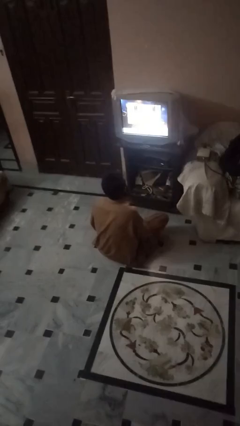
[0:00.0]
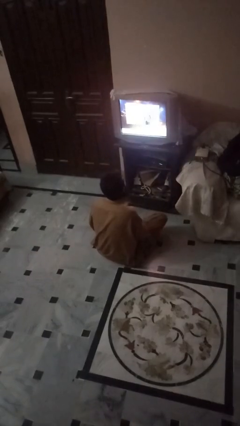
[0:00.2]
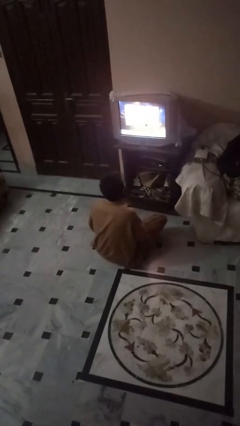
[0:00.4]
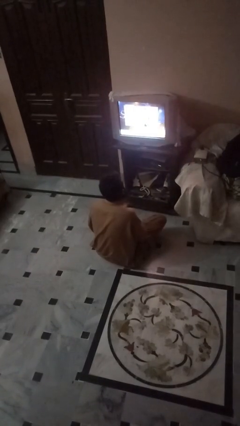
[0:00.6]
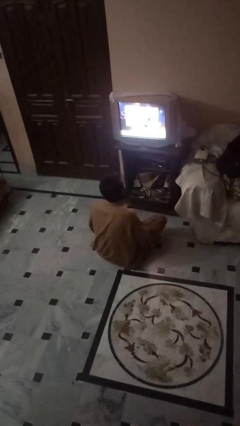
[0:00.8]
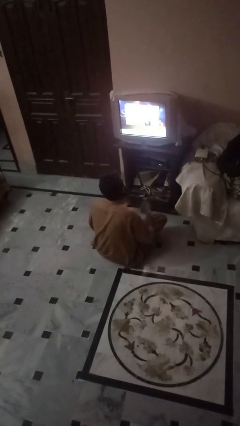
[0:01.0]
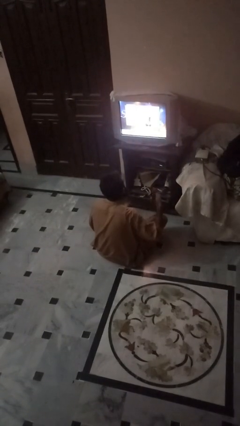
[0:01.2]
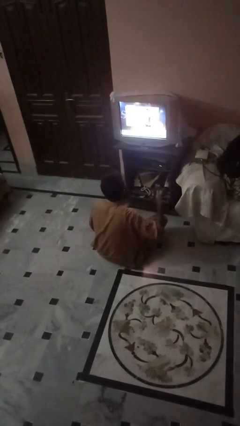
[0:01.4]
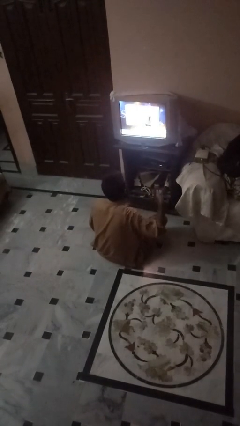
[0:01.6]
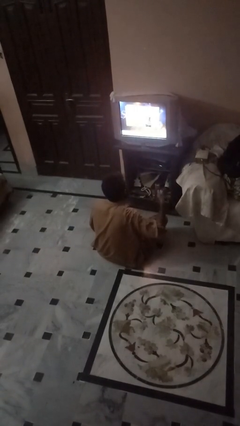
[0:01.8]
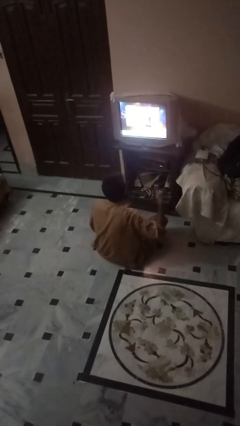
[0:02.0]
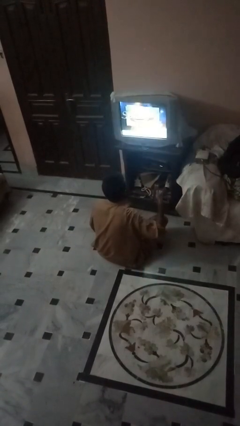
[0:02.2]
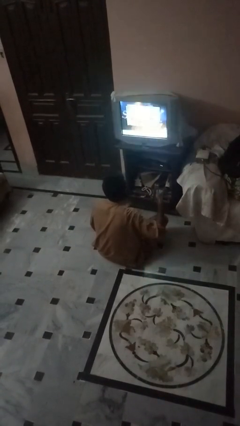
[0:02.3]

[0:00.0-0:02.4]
person uses television remote

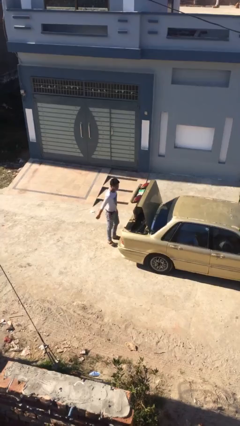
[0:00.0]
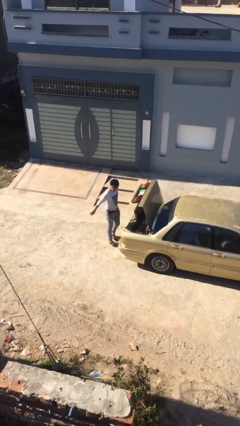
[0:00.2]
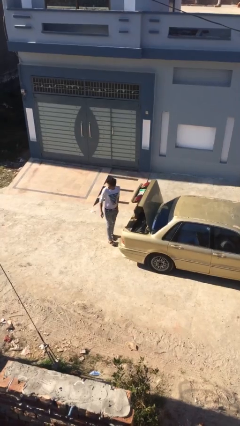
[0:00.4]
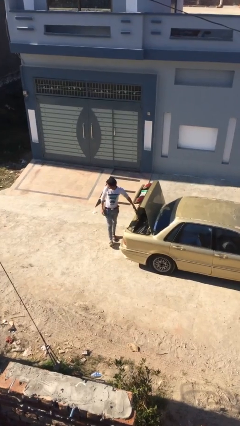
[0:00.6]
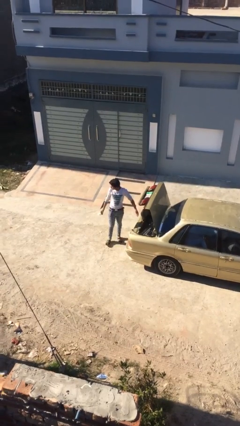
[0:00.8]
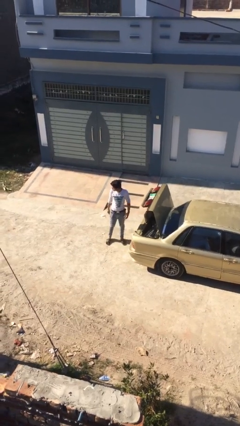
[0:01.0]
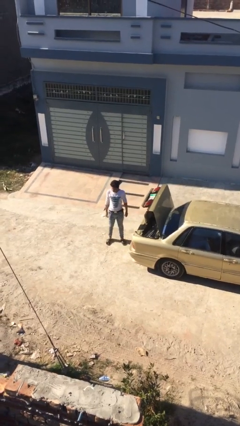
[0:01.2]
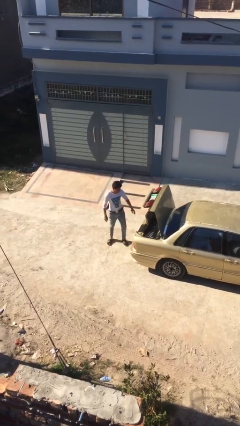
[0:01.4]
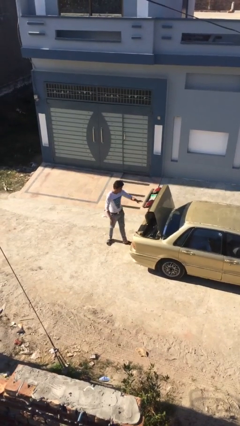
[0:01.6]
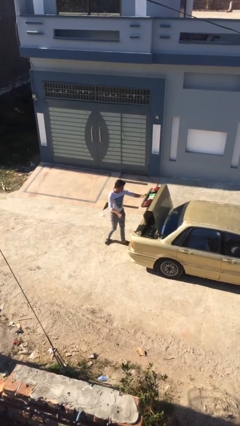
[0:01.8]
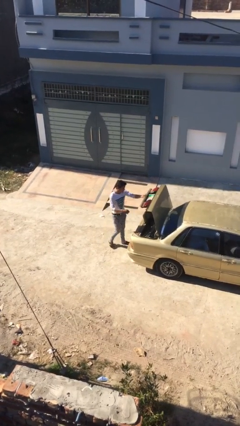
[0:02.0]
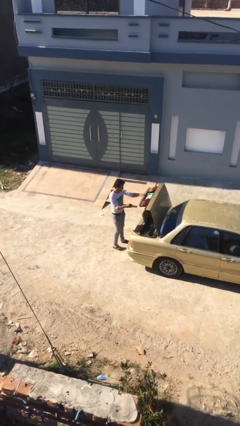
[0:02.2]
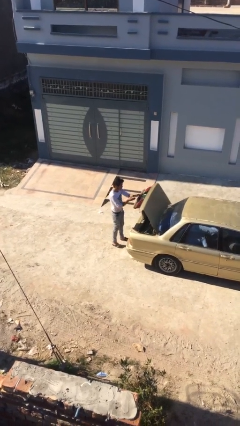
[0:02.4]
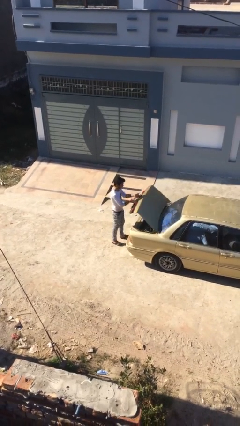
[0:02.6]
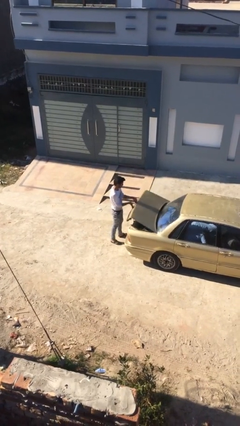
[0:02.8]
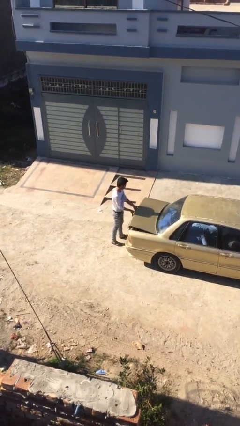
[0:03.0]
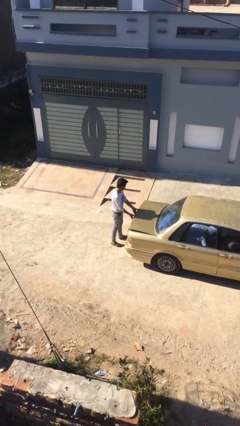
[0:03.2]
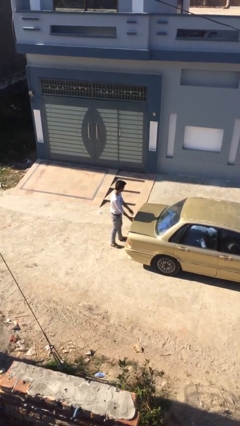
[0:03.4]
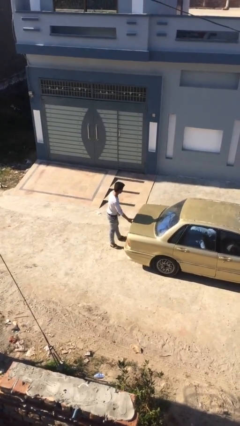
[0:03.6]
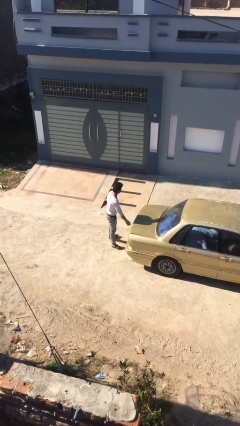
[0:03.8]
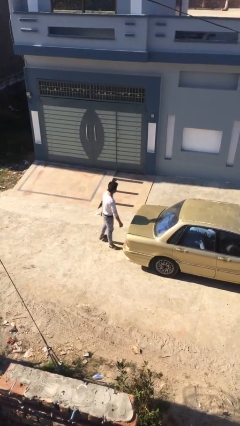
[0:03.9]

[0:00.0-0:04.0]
person closes car trunk

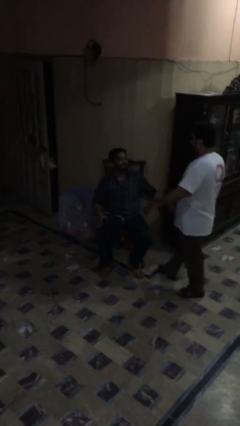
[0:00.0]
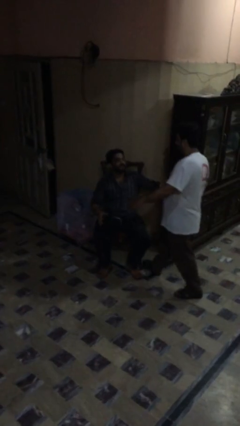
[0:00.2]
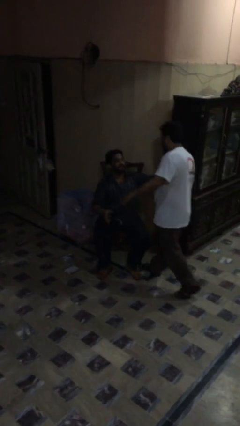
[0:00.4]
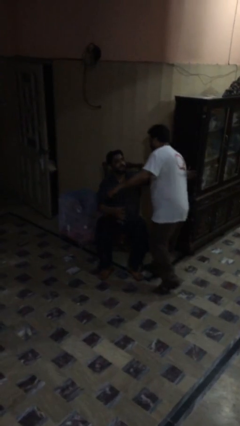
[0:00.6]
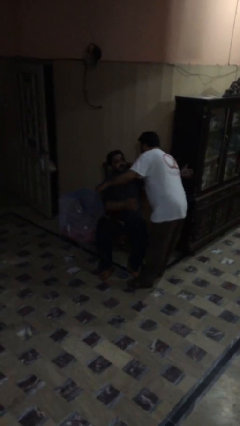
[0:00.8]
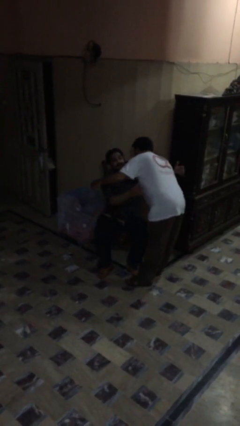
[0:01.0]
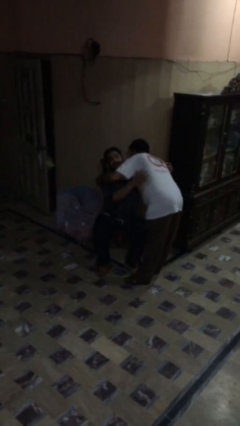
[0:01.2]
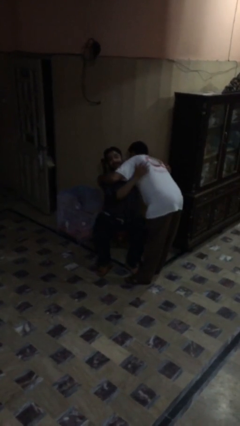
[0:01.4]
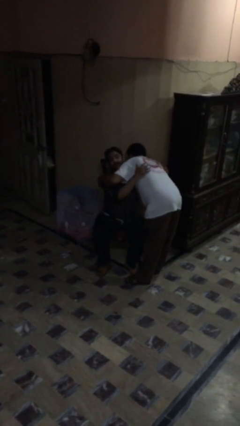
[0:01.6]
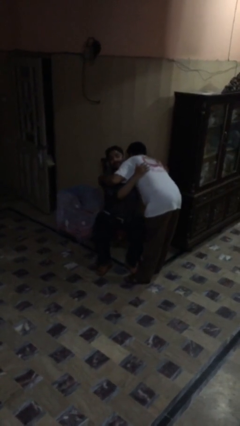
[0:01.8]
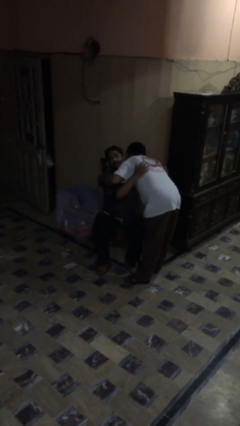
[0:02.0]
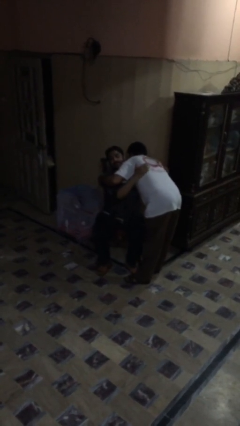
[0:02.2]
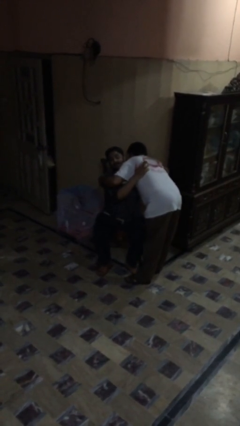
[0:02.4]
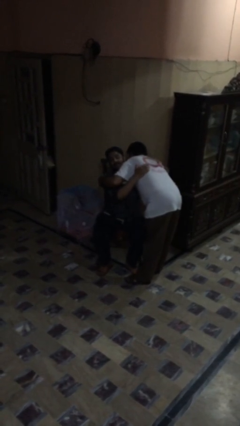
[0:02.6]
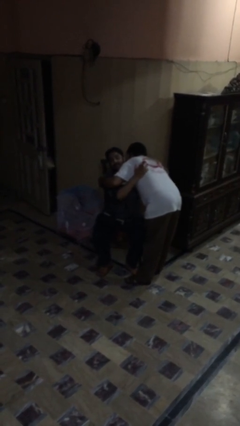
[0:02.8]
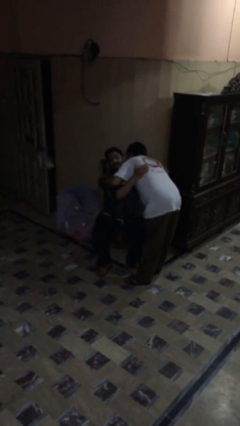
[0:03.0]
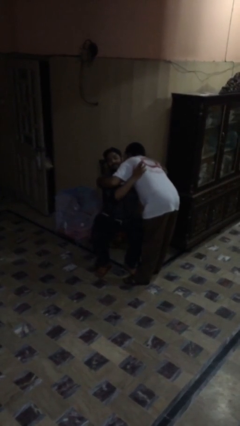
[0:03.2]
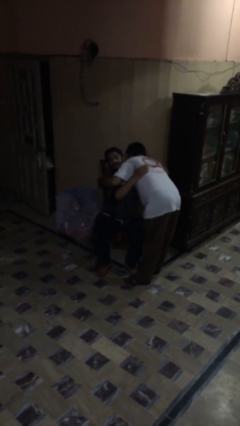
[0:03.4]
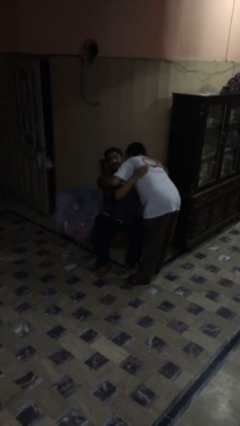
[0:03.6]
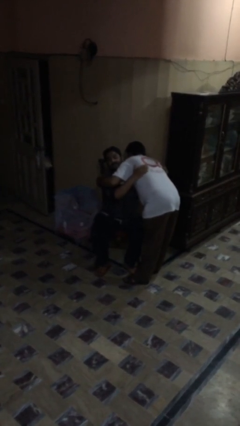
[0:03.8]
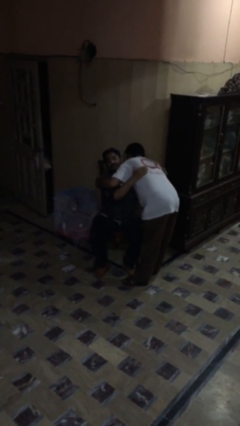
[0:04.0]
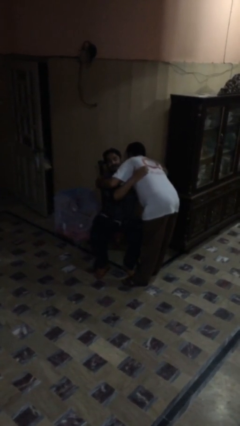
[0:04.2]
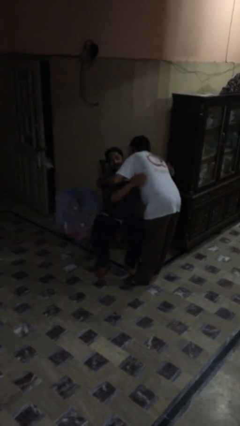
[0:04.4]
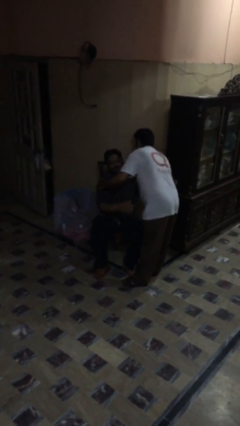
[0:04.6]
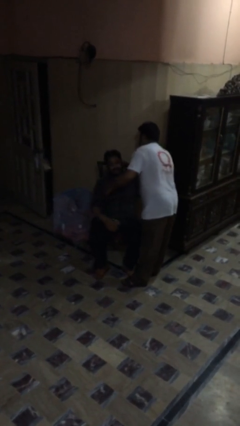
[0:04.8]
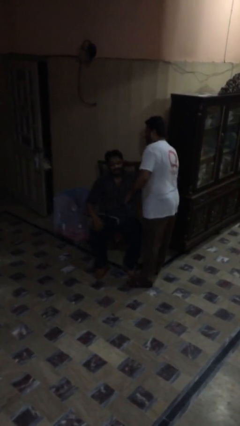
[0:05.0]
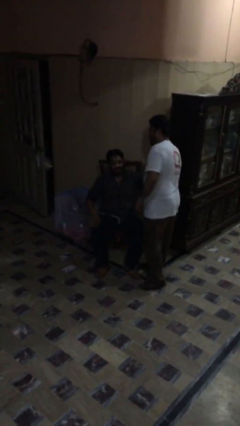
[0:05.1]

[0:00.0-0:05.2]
person embraces person

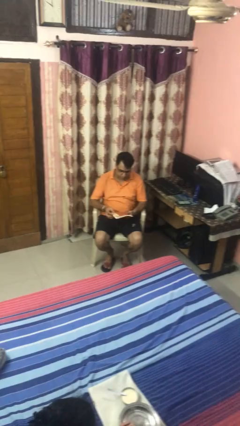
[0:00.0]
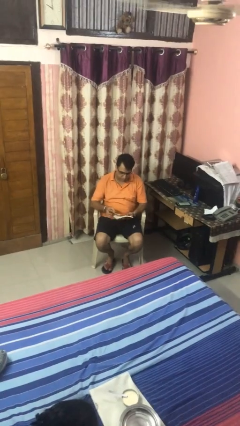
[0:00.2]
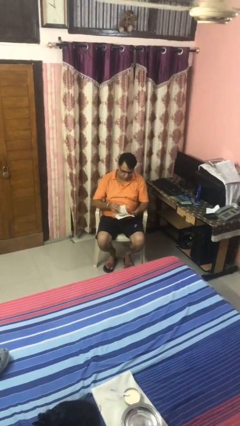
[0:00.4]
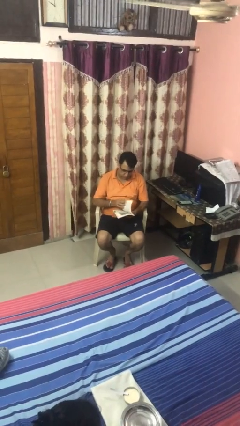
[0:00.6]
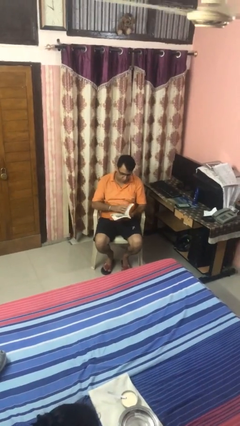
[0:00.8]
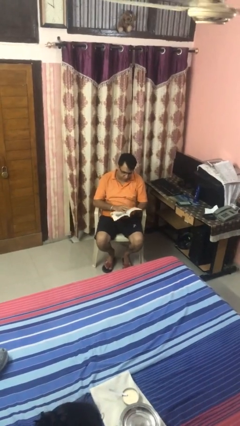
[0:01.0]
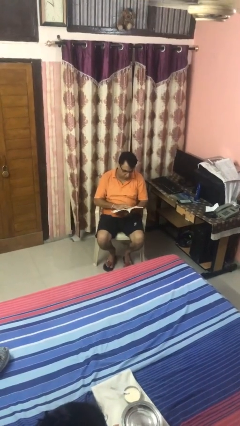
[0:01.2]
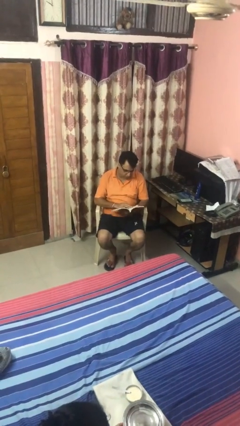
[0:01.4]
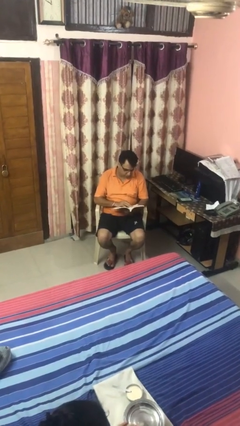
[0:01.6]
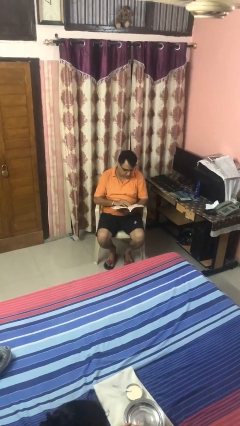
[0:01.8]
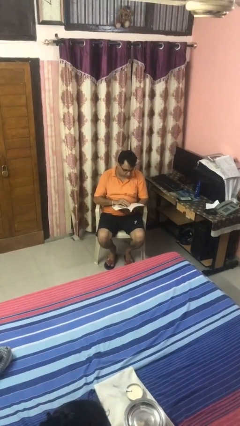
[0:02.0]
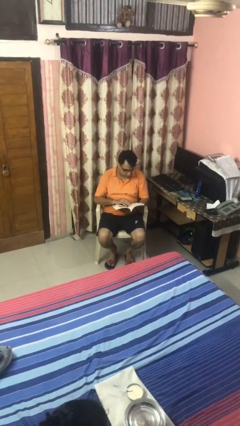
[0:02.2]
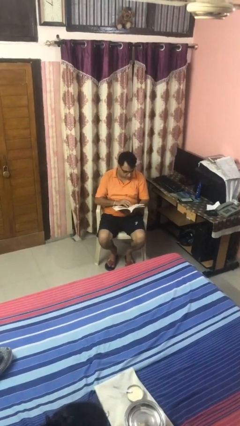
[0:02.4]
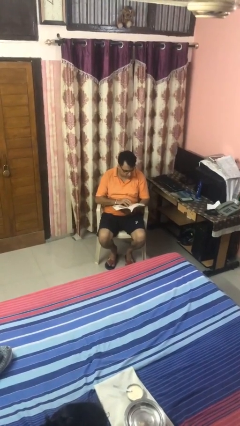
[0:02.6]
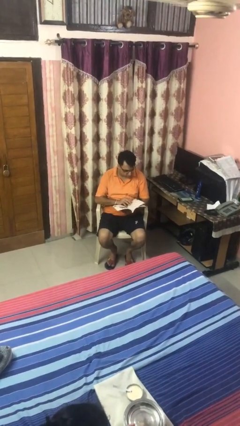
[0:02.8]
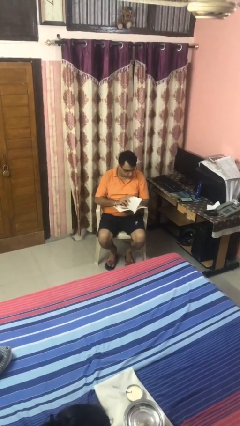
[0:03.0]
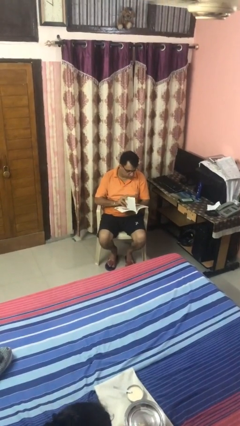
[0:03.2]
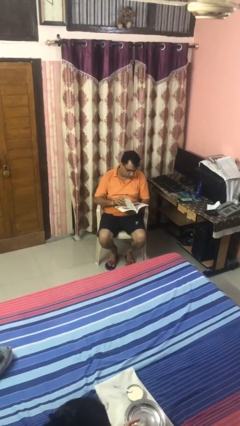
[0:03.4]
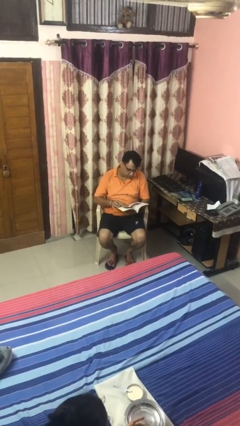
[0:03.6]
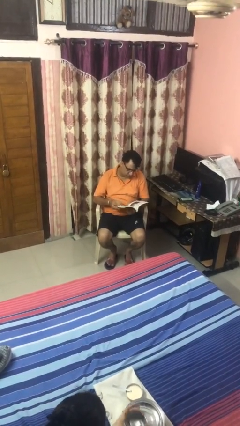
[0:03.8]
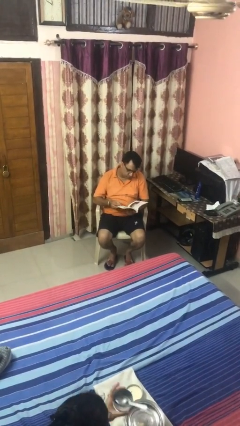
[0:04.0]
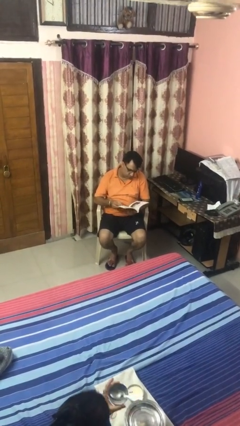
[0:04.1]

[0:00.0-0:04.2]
person reads book

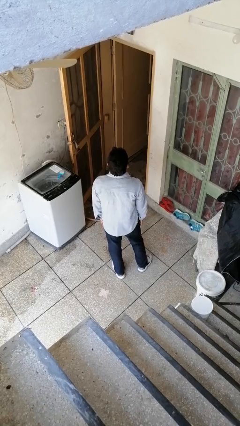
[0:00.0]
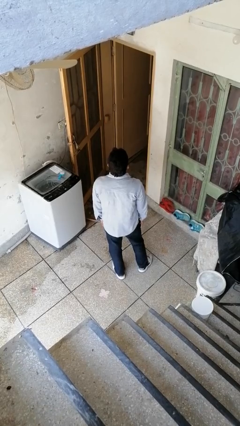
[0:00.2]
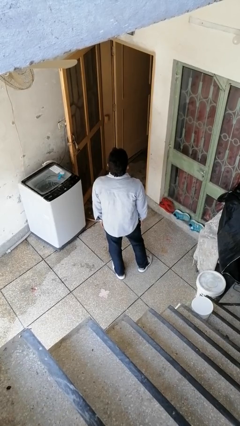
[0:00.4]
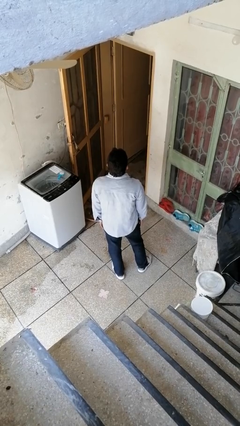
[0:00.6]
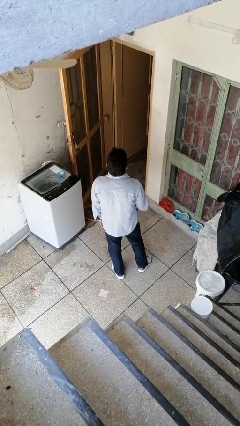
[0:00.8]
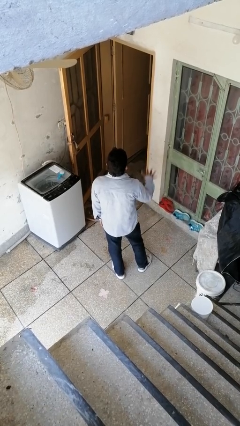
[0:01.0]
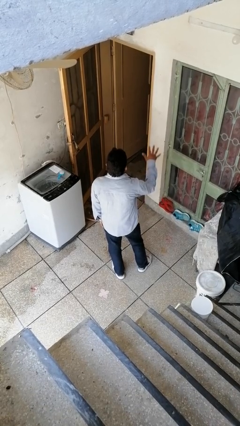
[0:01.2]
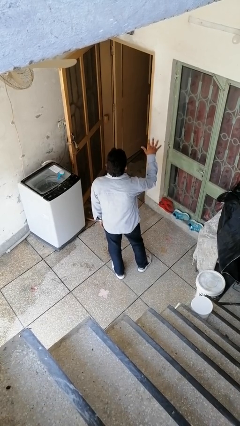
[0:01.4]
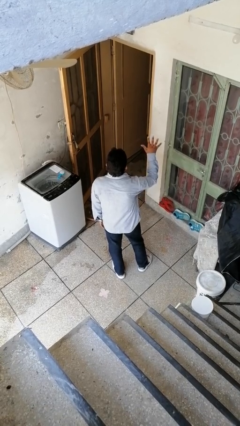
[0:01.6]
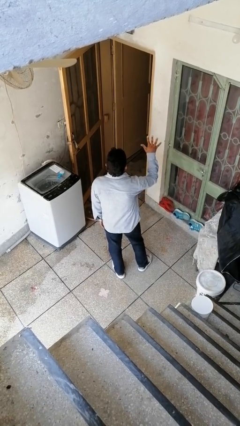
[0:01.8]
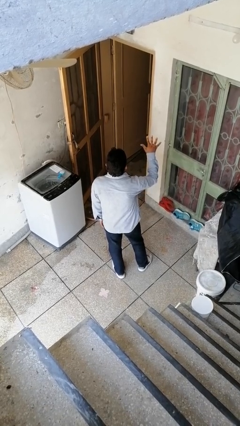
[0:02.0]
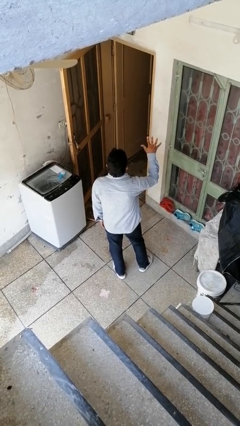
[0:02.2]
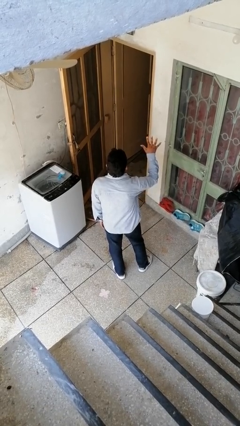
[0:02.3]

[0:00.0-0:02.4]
person gestures number five
